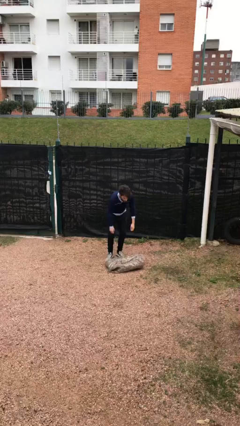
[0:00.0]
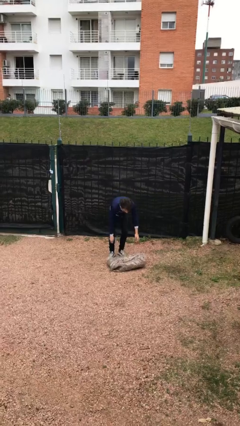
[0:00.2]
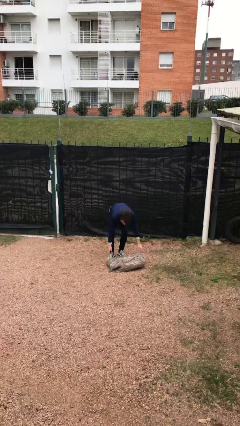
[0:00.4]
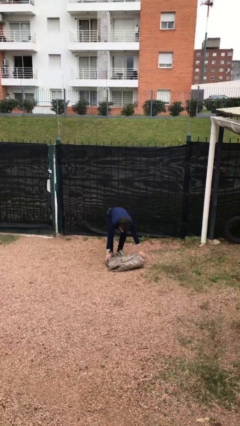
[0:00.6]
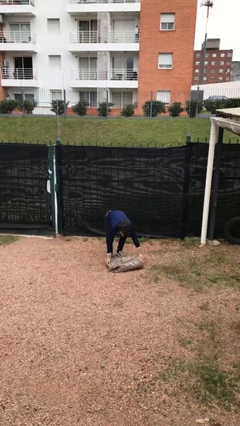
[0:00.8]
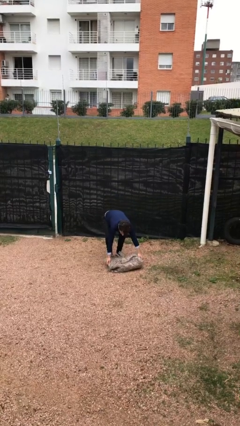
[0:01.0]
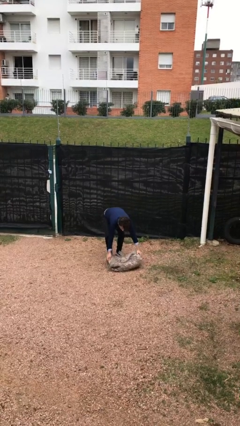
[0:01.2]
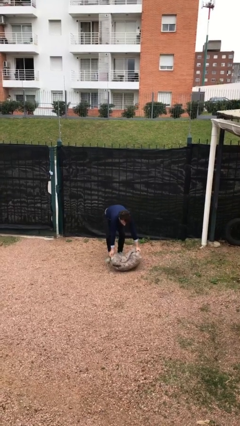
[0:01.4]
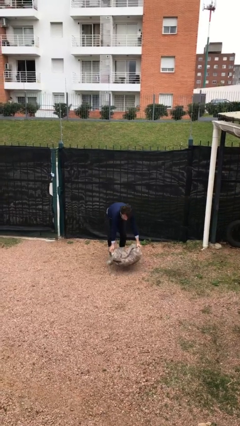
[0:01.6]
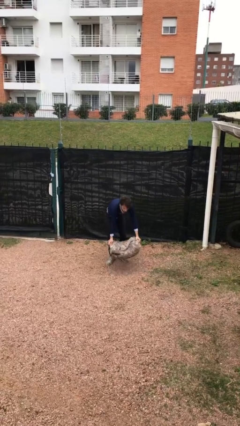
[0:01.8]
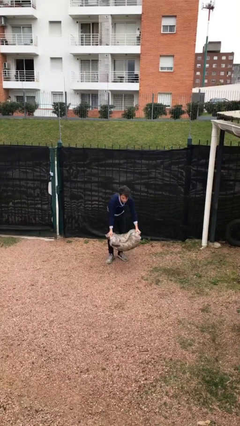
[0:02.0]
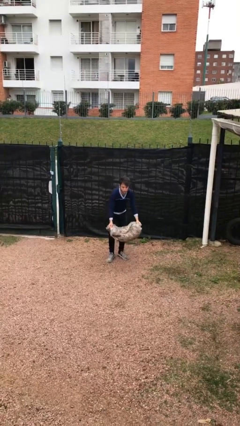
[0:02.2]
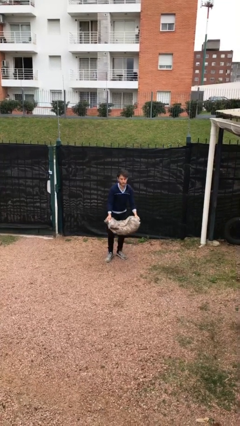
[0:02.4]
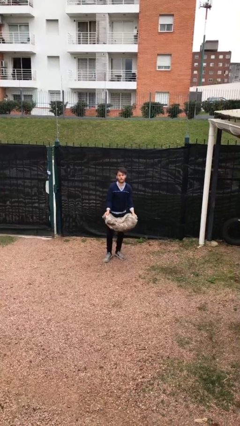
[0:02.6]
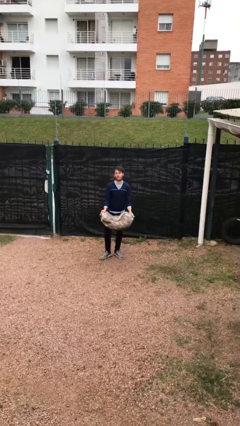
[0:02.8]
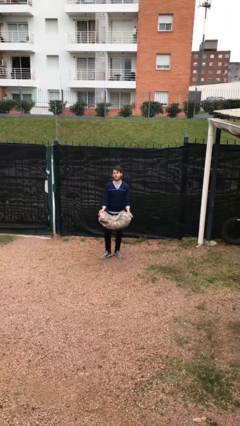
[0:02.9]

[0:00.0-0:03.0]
person picks up object from floor

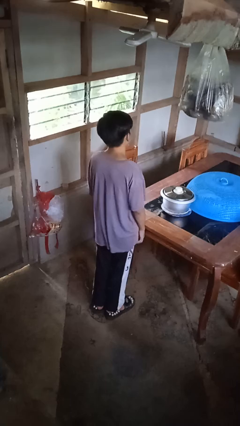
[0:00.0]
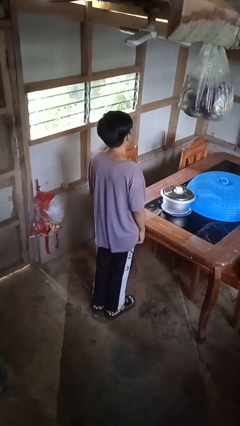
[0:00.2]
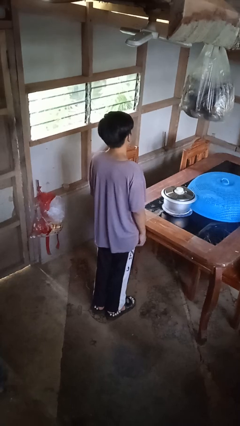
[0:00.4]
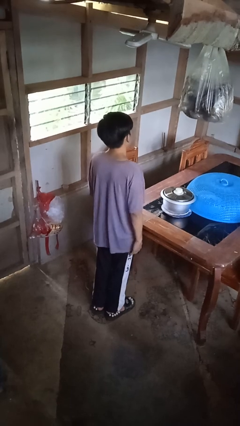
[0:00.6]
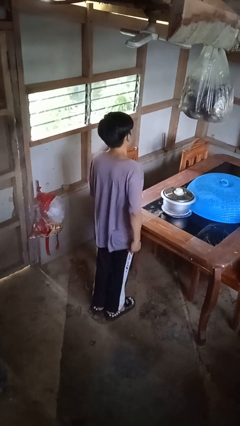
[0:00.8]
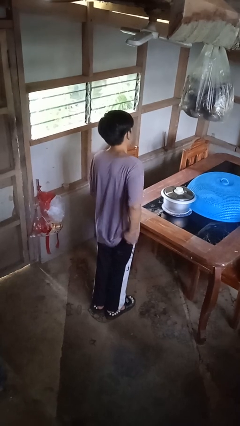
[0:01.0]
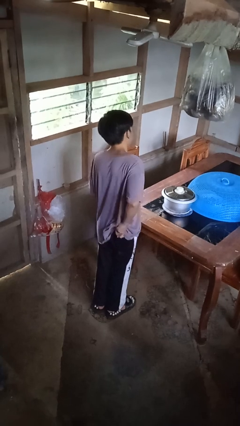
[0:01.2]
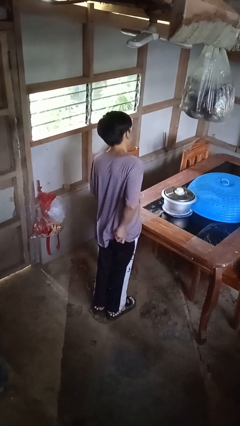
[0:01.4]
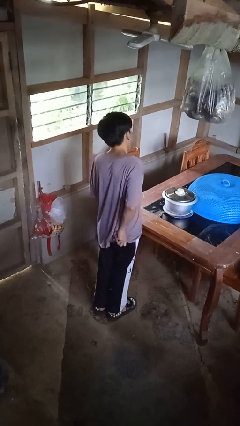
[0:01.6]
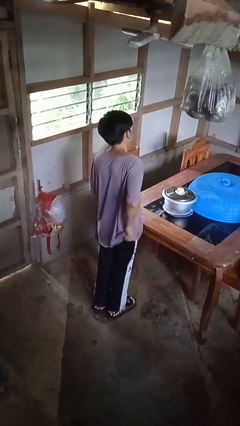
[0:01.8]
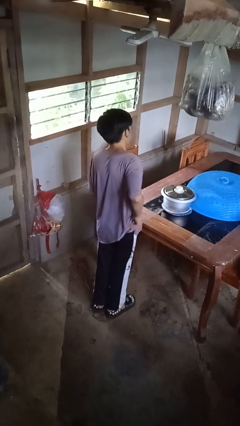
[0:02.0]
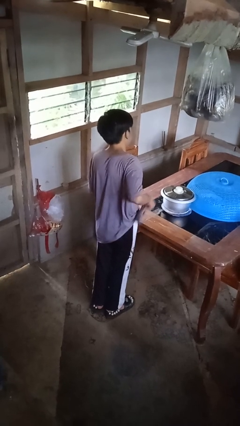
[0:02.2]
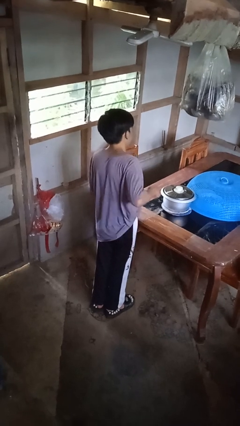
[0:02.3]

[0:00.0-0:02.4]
person takes phone from pocket

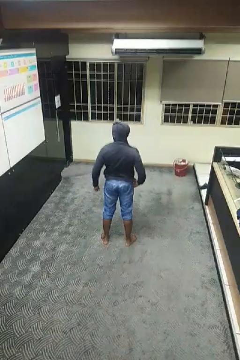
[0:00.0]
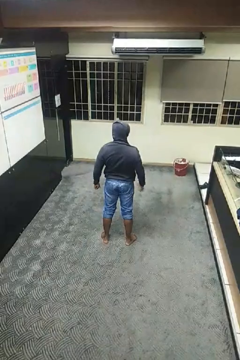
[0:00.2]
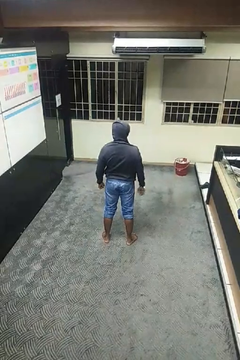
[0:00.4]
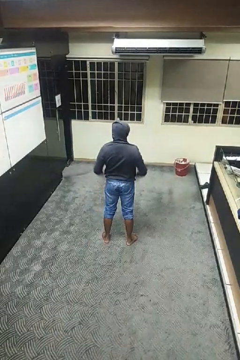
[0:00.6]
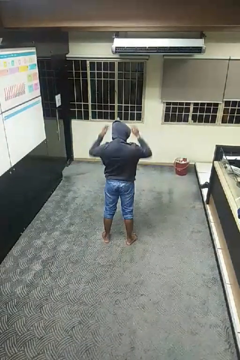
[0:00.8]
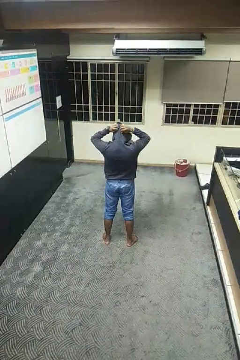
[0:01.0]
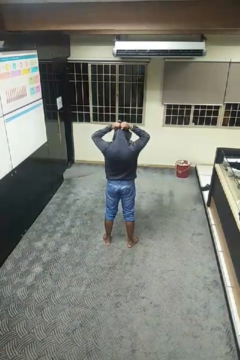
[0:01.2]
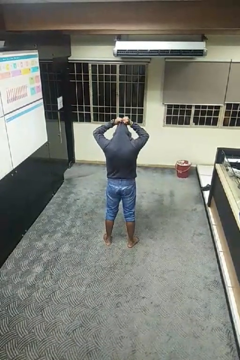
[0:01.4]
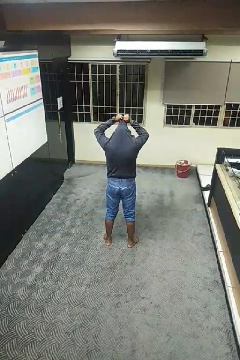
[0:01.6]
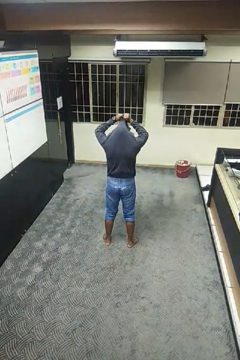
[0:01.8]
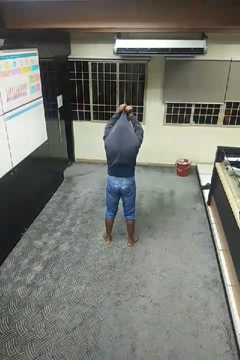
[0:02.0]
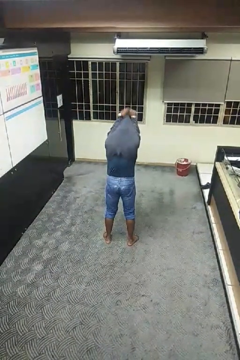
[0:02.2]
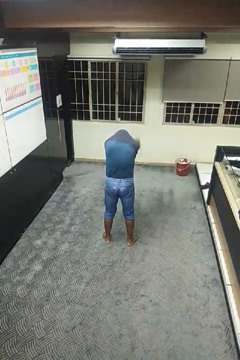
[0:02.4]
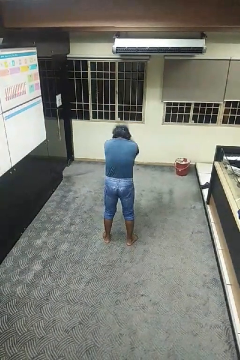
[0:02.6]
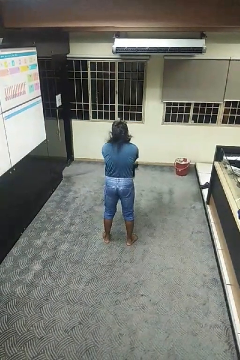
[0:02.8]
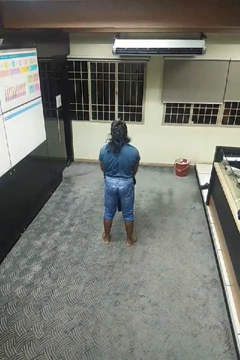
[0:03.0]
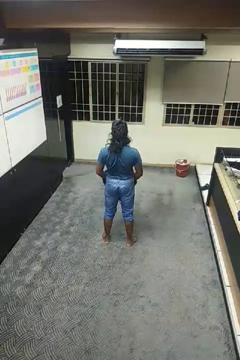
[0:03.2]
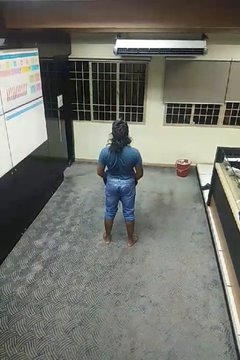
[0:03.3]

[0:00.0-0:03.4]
person takes off hoodie

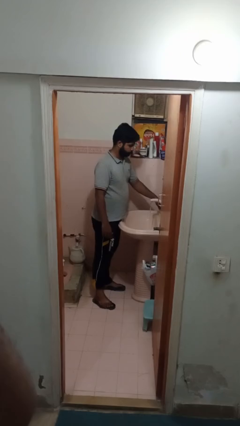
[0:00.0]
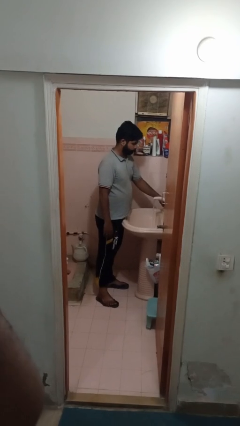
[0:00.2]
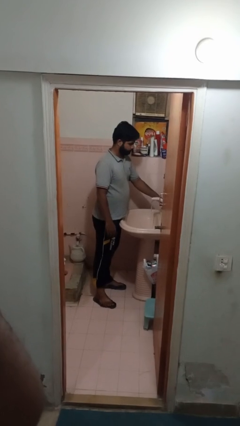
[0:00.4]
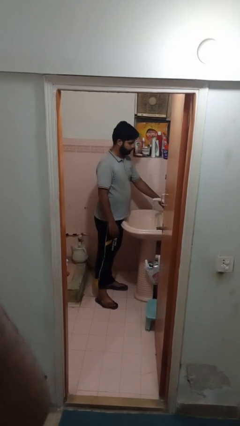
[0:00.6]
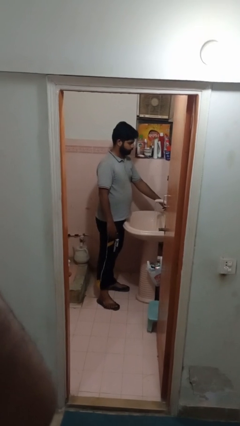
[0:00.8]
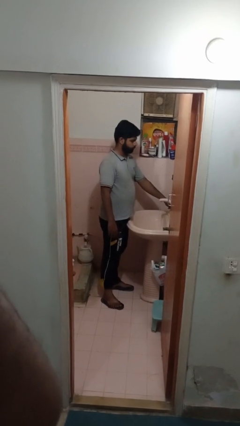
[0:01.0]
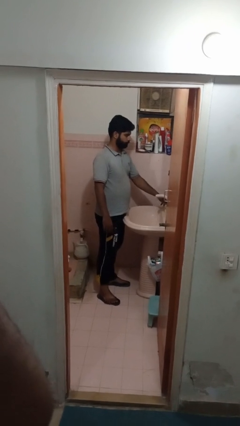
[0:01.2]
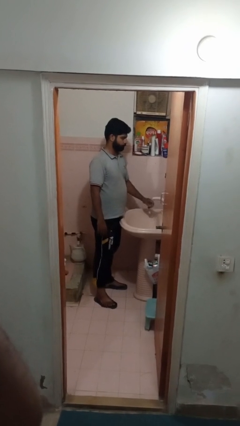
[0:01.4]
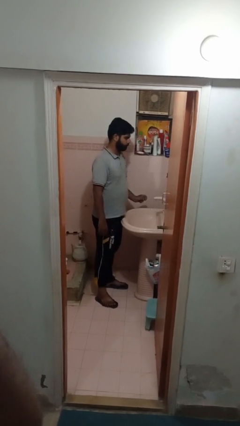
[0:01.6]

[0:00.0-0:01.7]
person turns off faucet

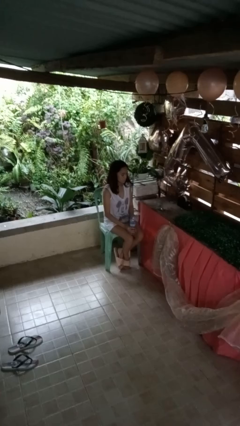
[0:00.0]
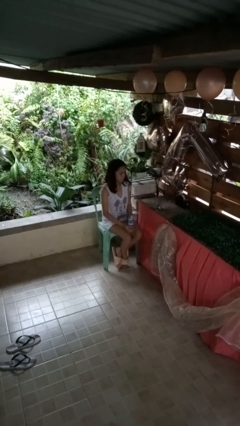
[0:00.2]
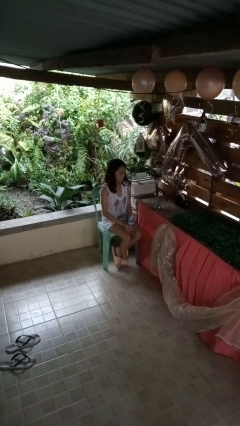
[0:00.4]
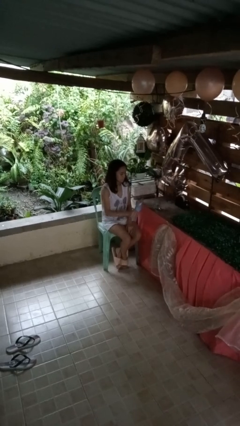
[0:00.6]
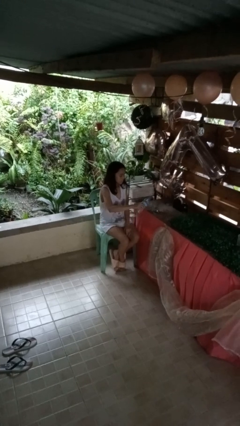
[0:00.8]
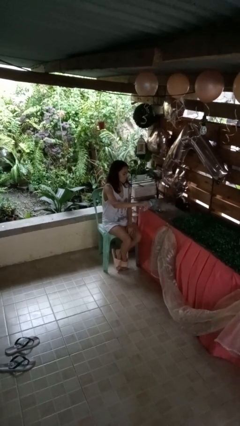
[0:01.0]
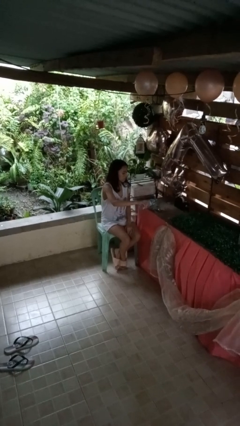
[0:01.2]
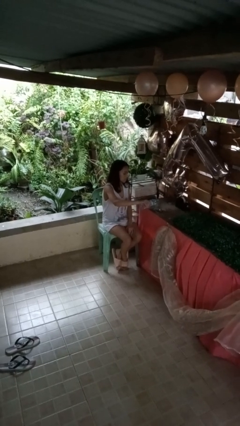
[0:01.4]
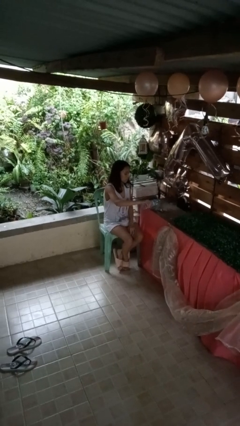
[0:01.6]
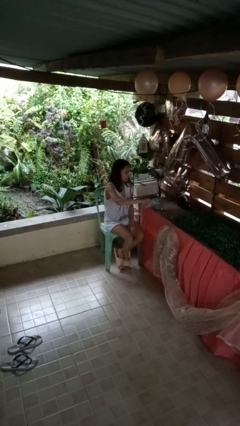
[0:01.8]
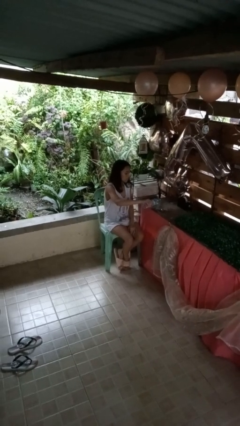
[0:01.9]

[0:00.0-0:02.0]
person pours liquid into cup

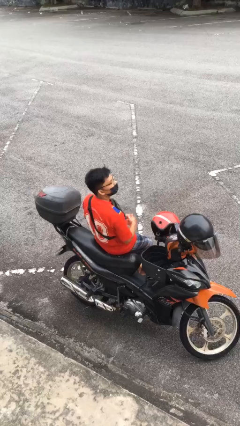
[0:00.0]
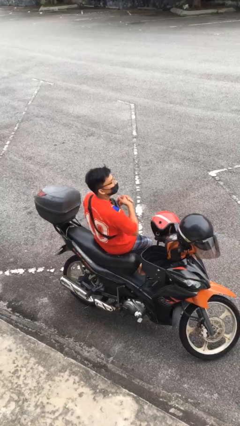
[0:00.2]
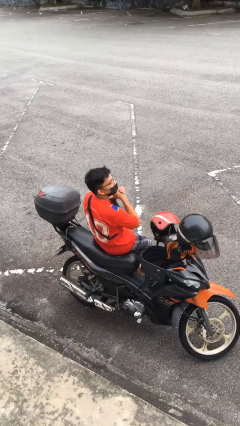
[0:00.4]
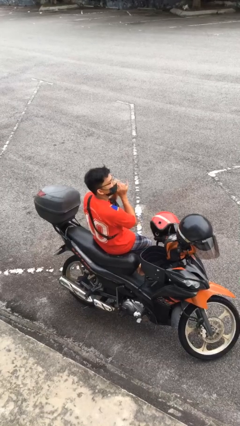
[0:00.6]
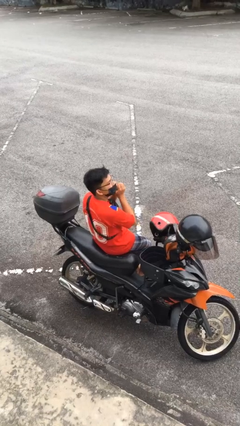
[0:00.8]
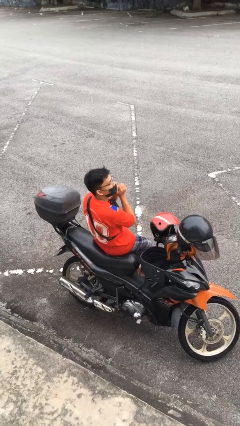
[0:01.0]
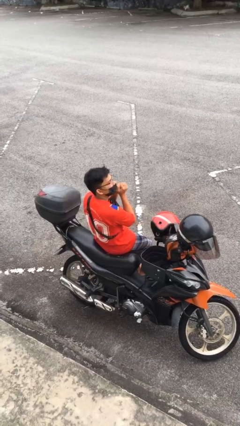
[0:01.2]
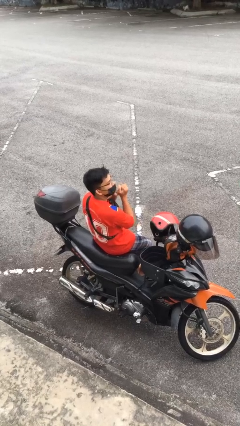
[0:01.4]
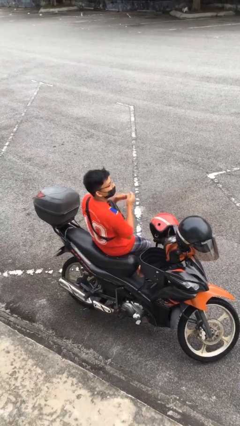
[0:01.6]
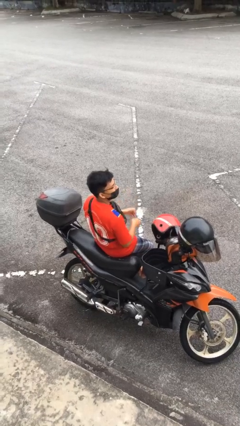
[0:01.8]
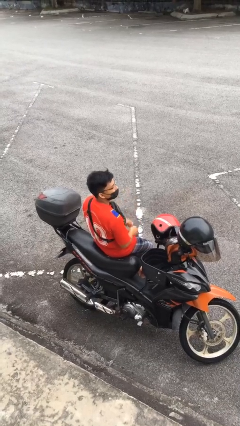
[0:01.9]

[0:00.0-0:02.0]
person cracks knuckles

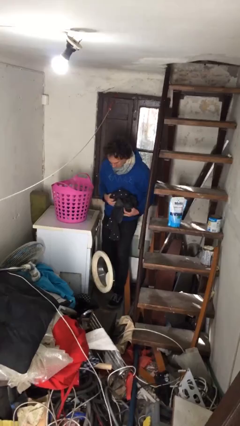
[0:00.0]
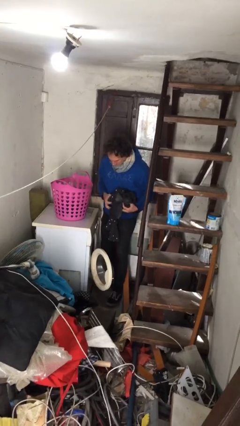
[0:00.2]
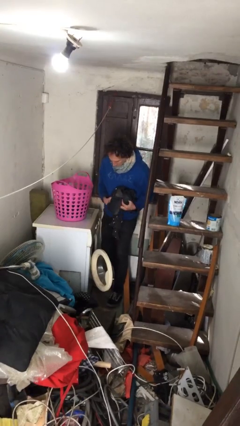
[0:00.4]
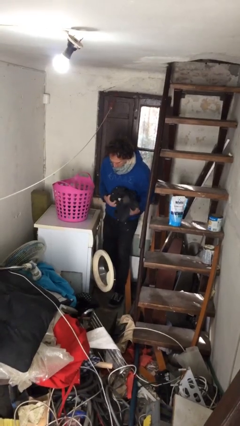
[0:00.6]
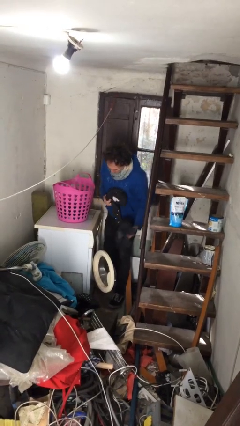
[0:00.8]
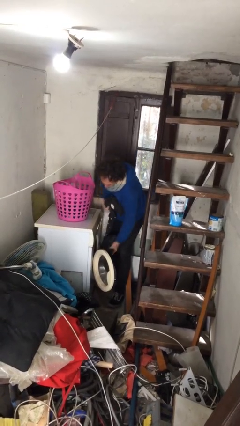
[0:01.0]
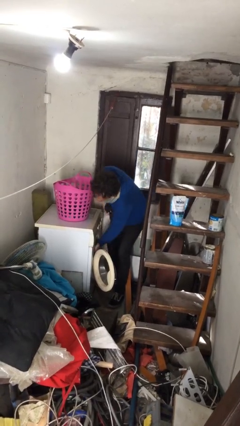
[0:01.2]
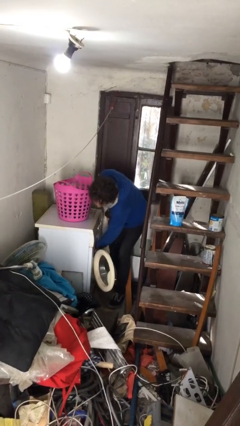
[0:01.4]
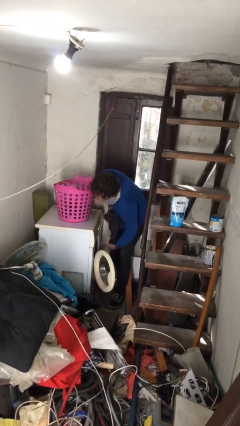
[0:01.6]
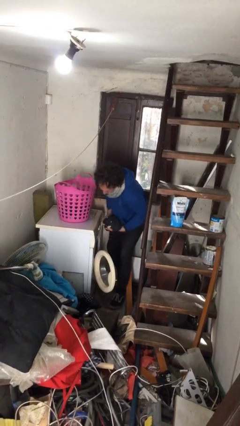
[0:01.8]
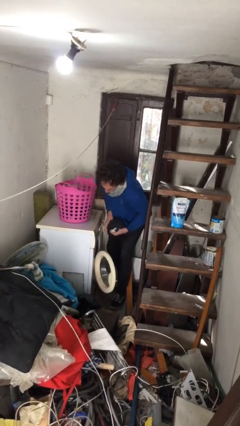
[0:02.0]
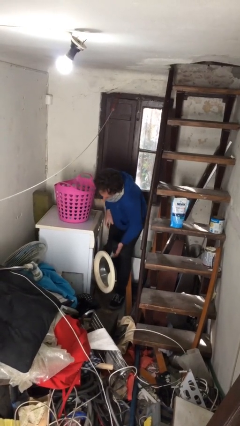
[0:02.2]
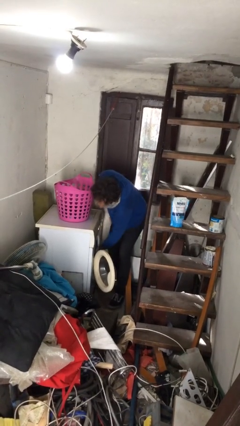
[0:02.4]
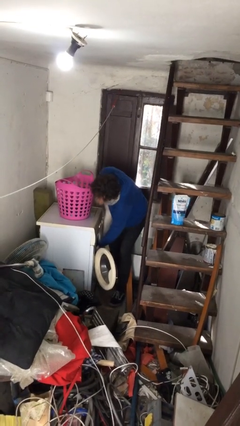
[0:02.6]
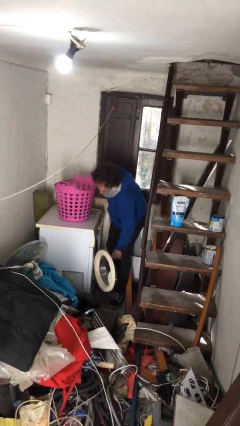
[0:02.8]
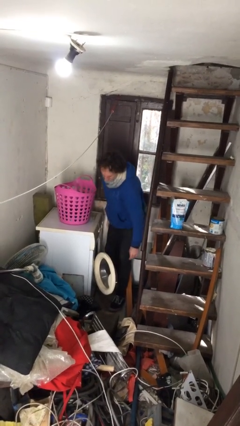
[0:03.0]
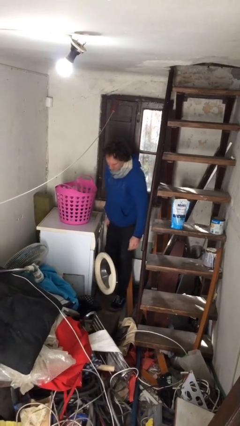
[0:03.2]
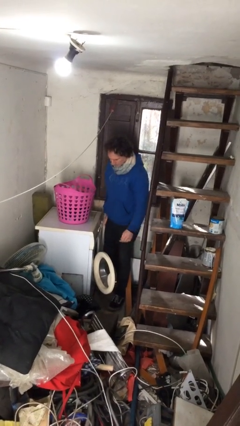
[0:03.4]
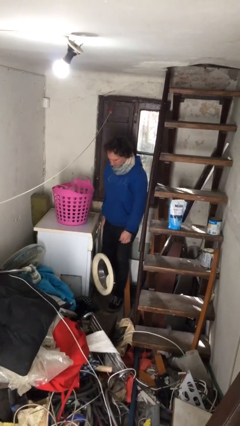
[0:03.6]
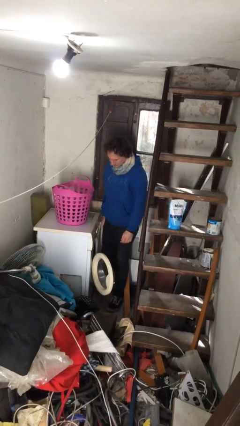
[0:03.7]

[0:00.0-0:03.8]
person loads clotheswasher
